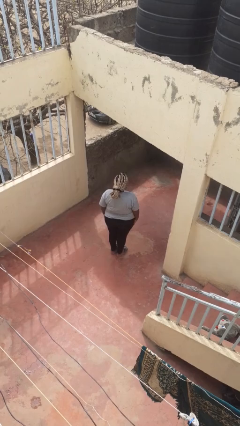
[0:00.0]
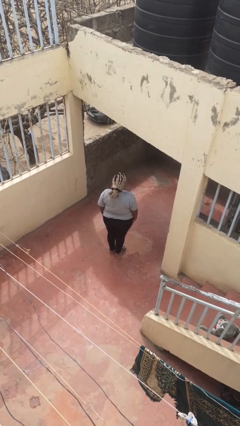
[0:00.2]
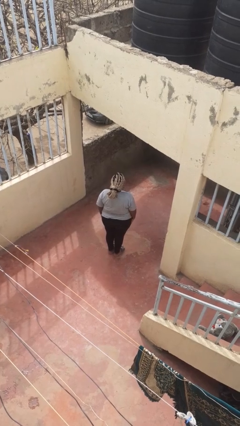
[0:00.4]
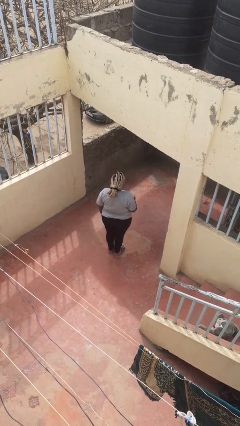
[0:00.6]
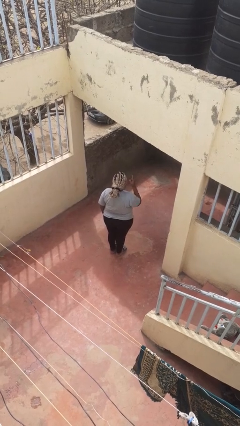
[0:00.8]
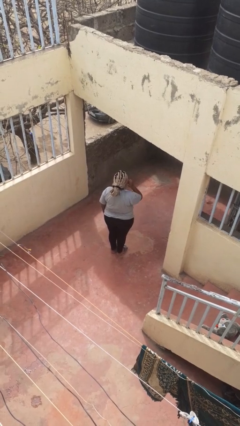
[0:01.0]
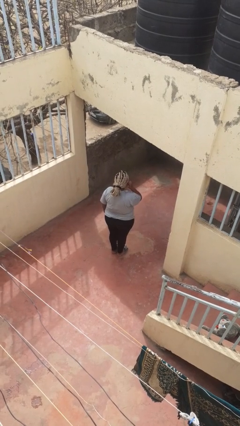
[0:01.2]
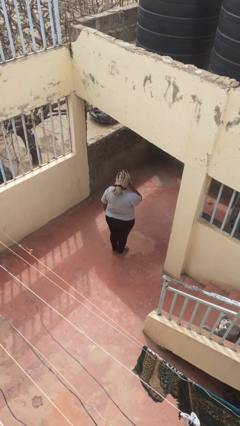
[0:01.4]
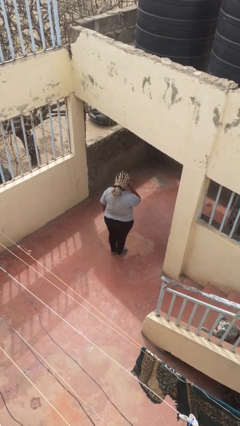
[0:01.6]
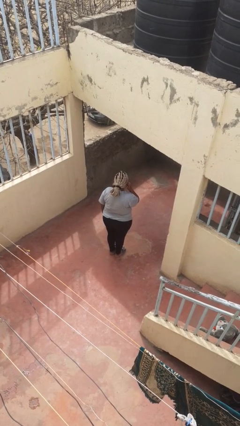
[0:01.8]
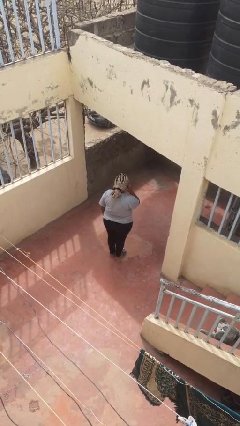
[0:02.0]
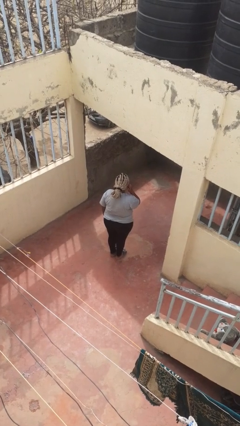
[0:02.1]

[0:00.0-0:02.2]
person gestures listen closely

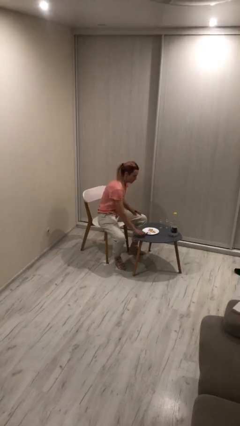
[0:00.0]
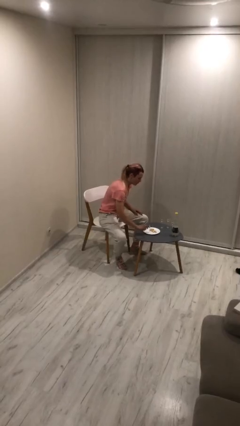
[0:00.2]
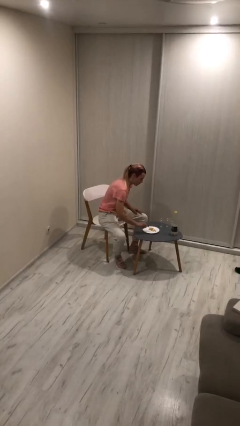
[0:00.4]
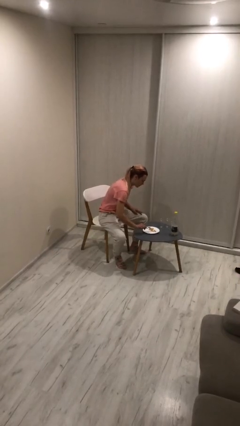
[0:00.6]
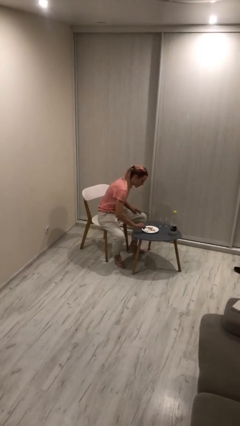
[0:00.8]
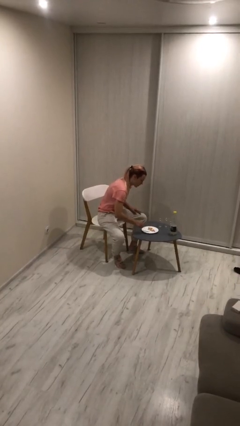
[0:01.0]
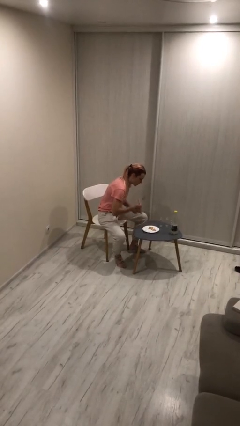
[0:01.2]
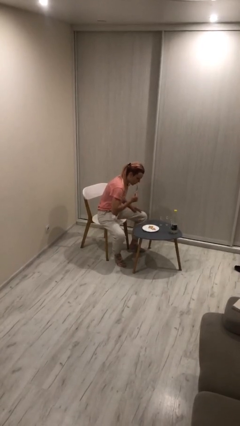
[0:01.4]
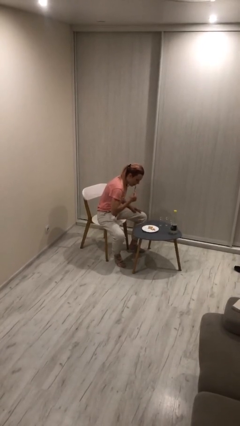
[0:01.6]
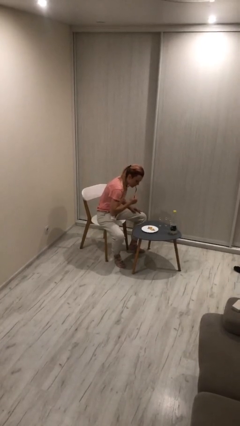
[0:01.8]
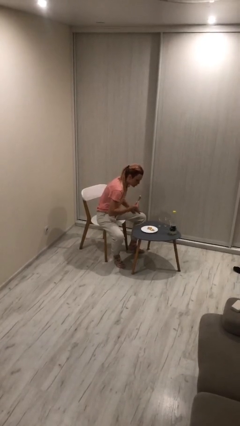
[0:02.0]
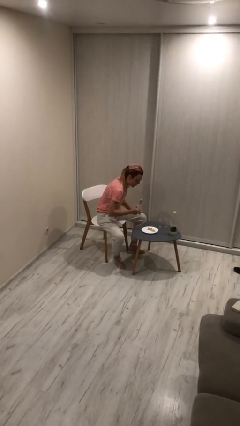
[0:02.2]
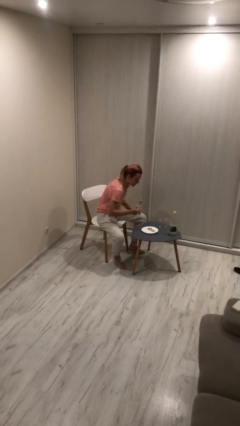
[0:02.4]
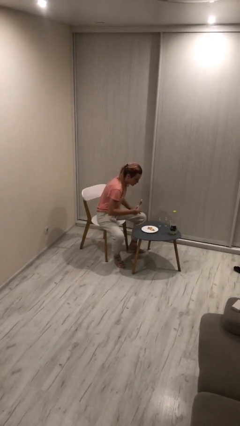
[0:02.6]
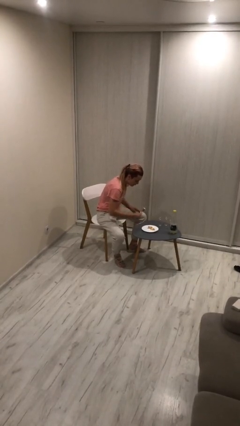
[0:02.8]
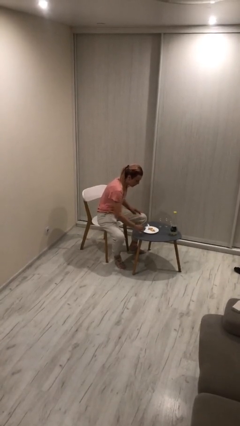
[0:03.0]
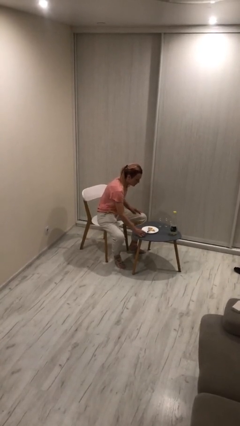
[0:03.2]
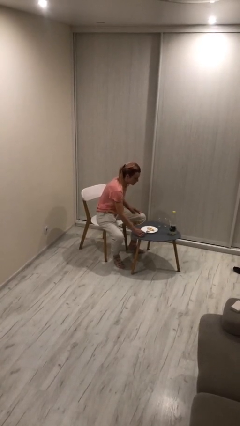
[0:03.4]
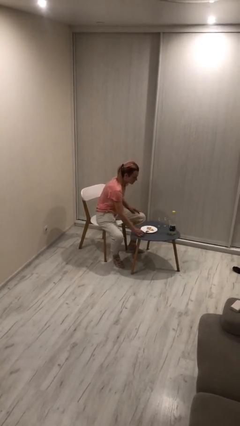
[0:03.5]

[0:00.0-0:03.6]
person eats with utensil

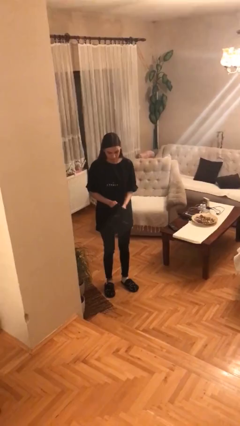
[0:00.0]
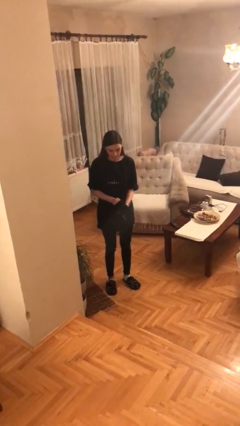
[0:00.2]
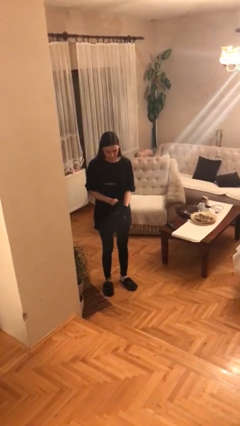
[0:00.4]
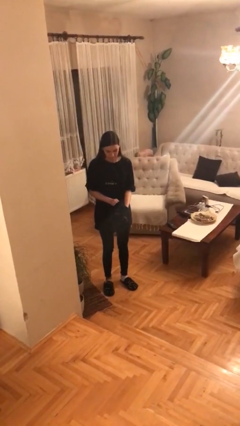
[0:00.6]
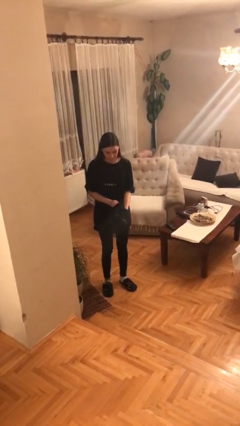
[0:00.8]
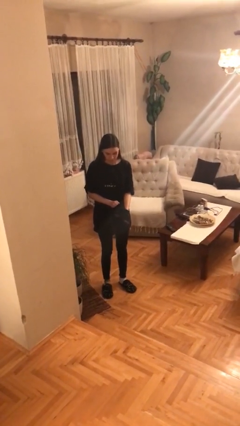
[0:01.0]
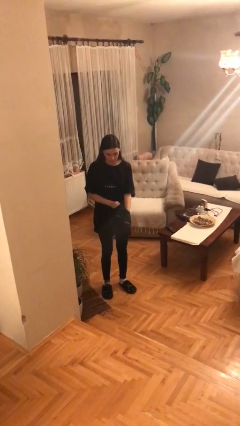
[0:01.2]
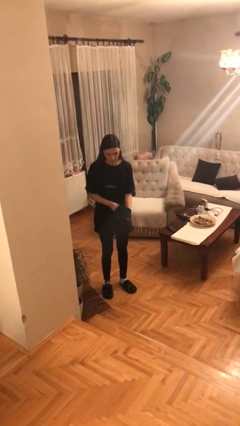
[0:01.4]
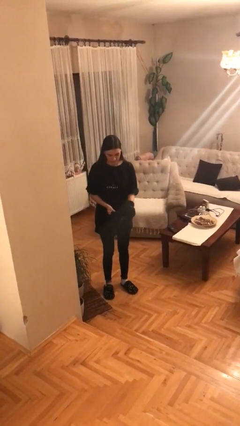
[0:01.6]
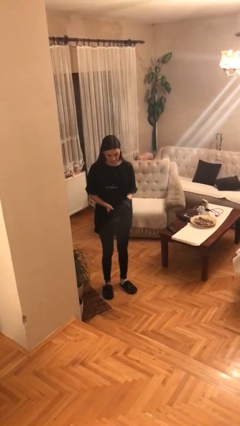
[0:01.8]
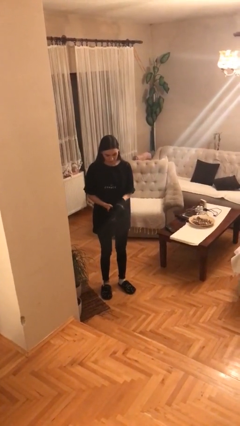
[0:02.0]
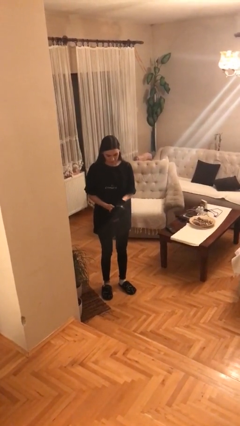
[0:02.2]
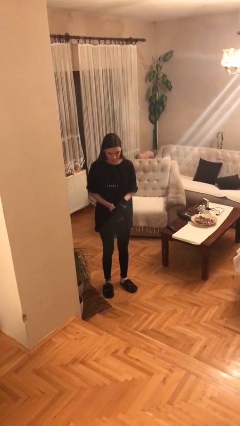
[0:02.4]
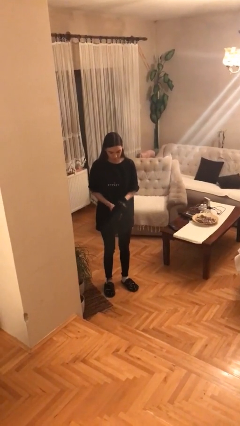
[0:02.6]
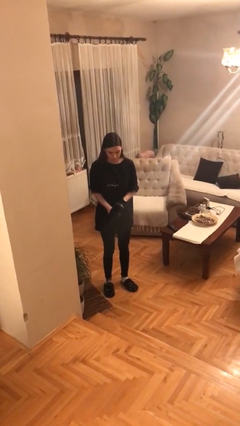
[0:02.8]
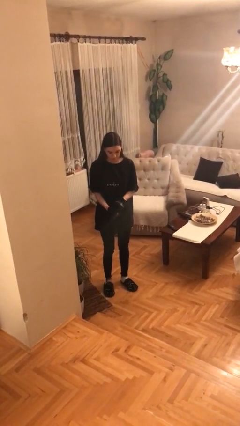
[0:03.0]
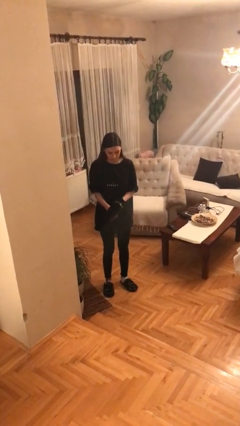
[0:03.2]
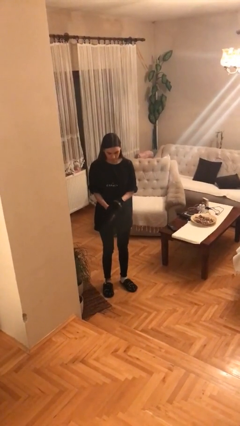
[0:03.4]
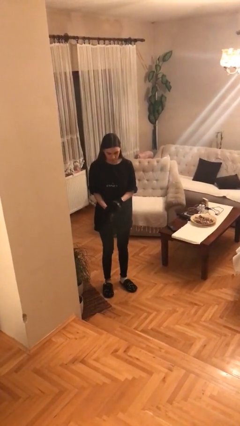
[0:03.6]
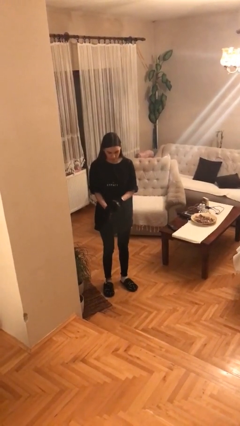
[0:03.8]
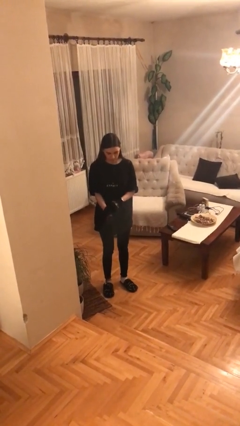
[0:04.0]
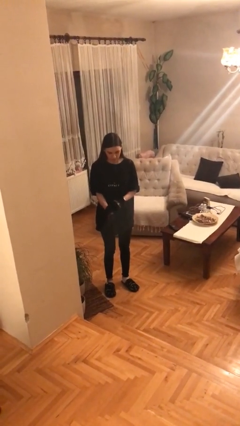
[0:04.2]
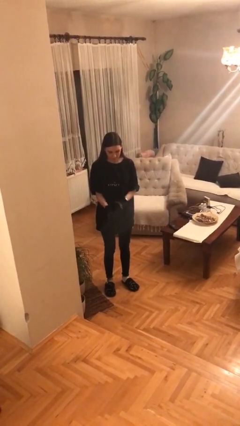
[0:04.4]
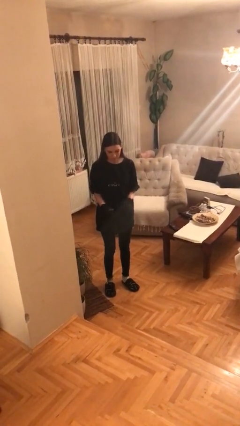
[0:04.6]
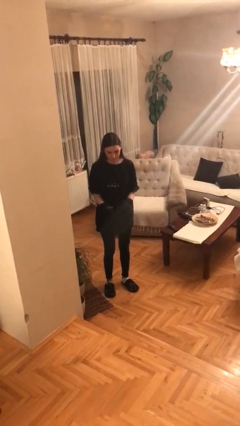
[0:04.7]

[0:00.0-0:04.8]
person puts on gloves

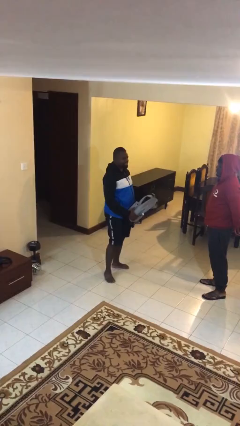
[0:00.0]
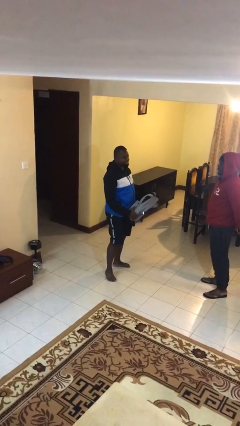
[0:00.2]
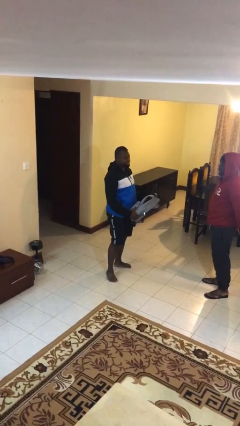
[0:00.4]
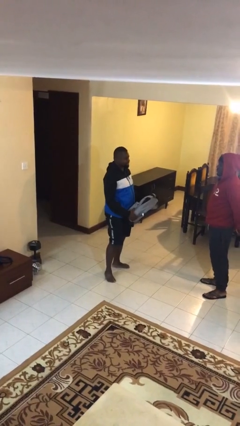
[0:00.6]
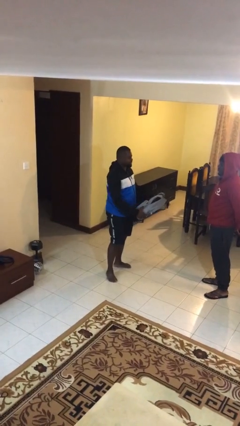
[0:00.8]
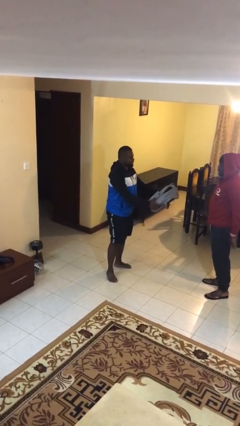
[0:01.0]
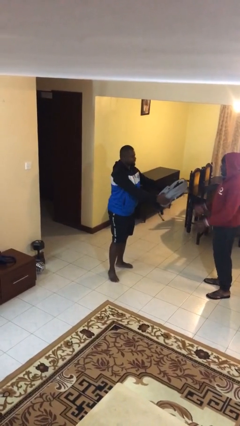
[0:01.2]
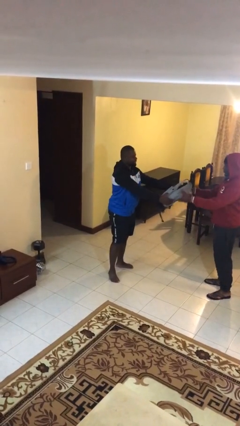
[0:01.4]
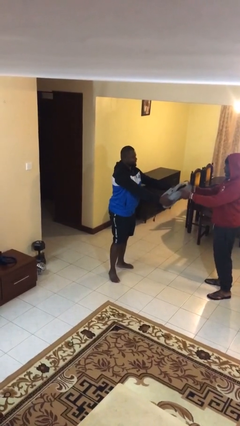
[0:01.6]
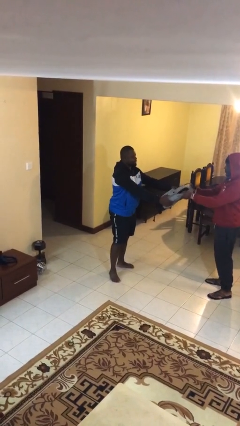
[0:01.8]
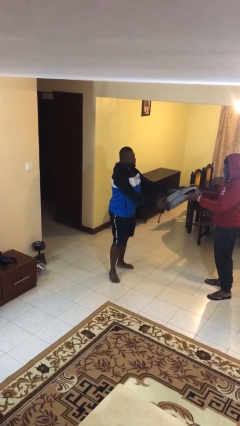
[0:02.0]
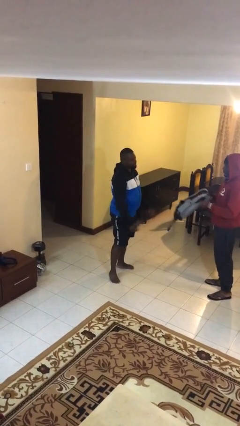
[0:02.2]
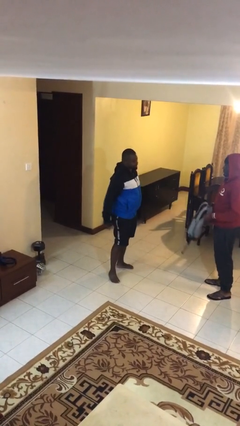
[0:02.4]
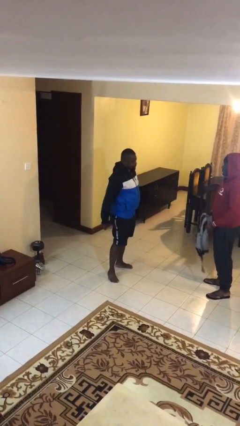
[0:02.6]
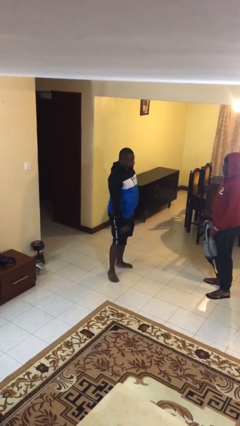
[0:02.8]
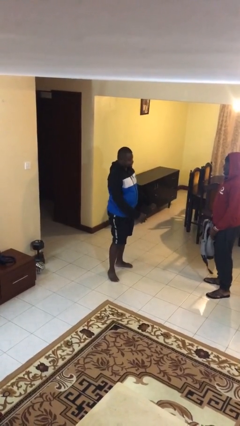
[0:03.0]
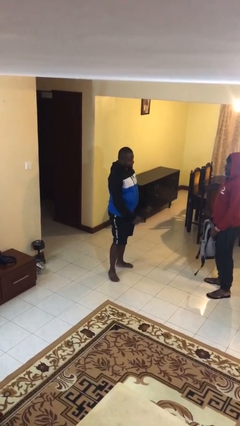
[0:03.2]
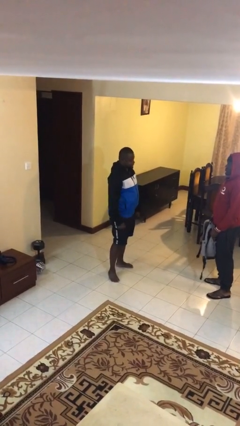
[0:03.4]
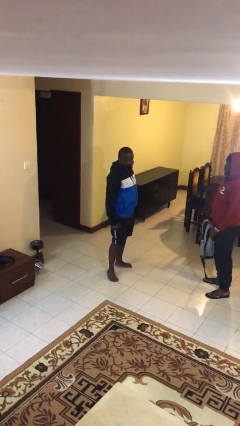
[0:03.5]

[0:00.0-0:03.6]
person transfers object to person

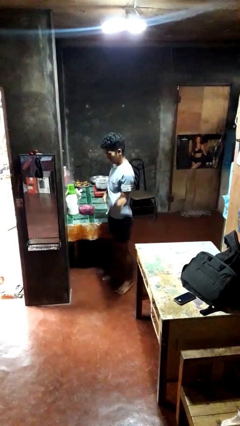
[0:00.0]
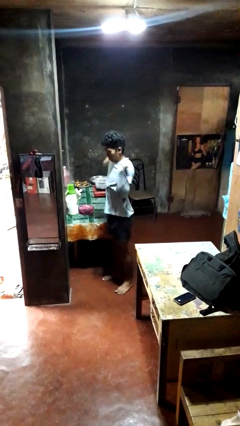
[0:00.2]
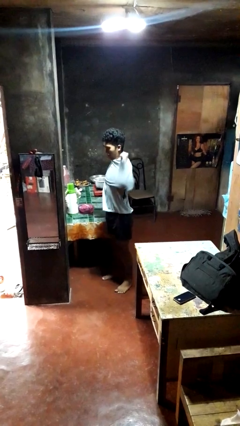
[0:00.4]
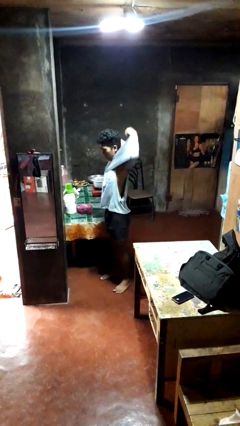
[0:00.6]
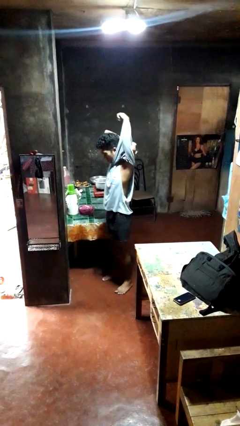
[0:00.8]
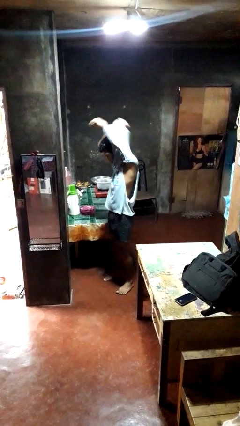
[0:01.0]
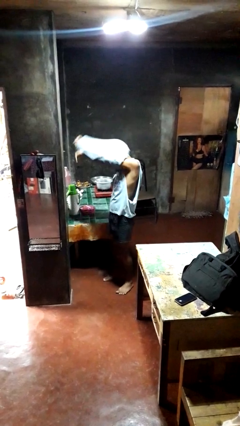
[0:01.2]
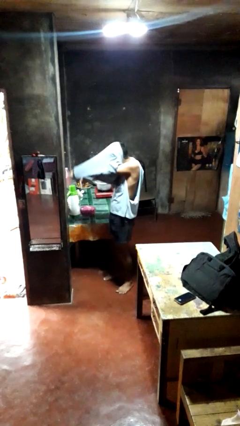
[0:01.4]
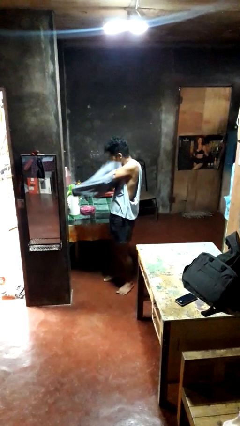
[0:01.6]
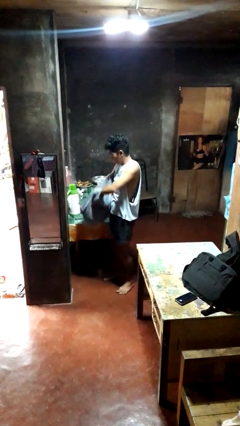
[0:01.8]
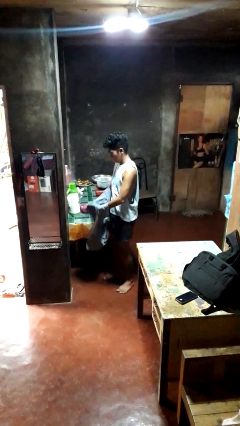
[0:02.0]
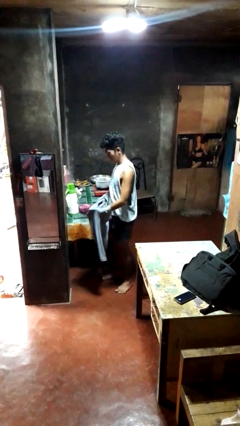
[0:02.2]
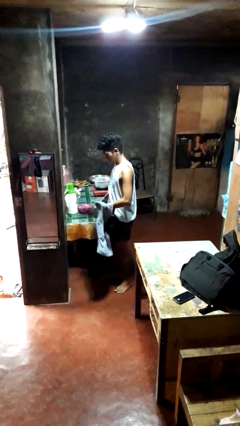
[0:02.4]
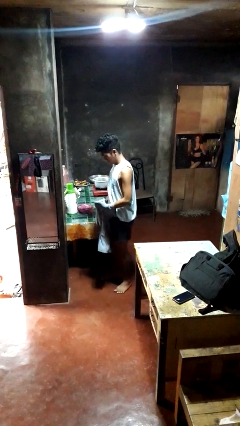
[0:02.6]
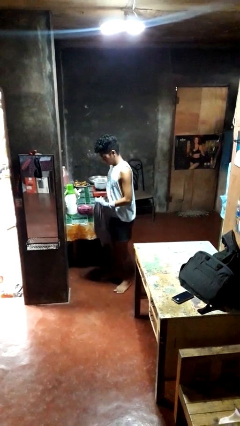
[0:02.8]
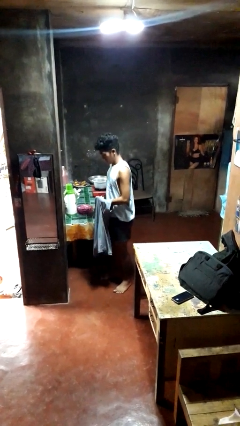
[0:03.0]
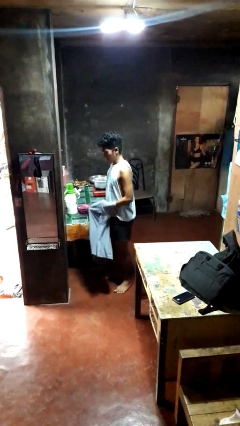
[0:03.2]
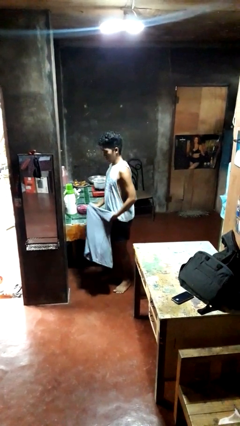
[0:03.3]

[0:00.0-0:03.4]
person takes off shirt

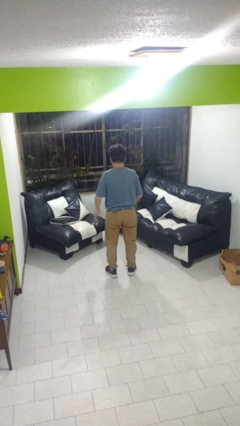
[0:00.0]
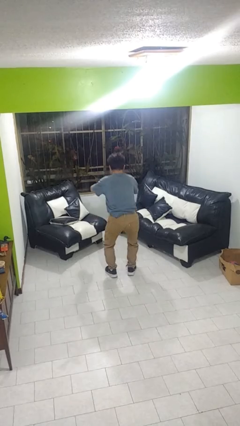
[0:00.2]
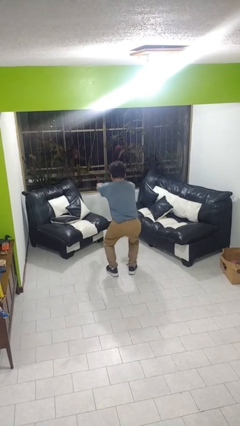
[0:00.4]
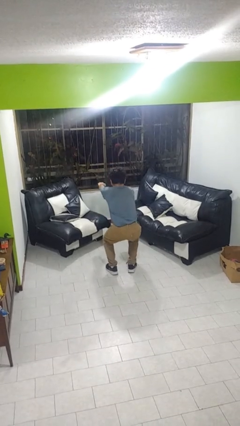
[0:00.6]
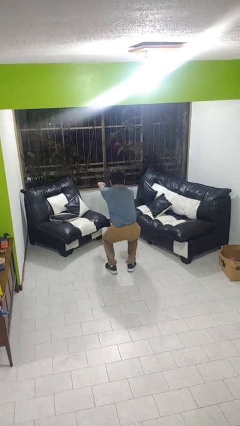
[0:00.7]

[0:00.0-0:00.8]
person squats
